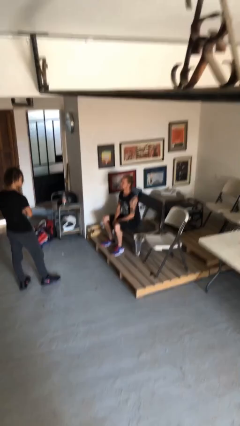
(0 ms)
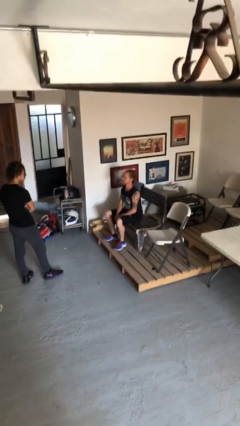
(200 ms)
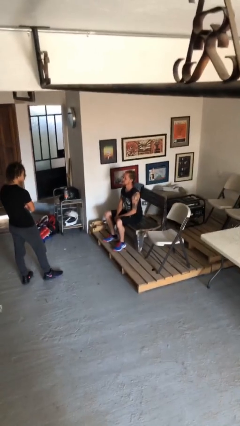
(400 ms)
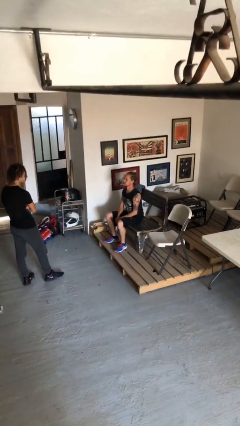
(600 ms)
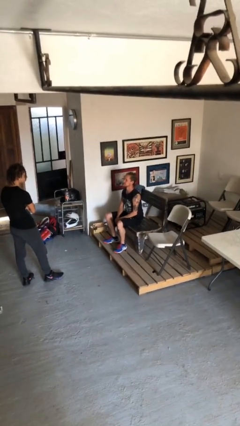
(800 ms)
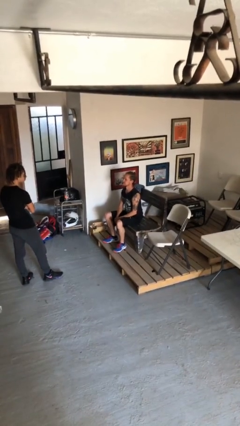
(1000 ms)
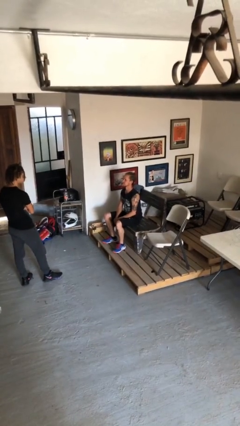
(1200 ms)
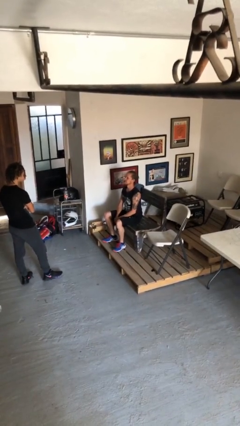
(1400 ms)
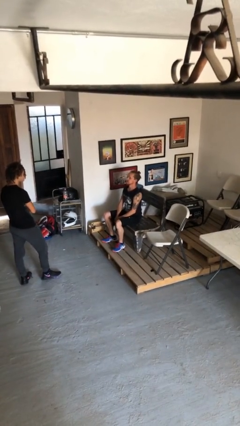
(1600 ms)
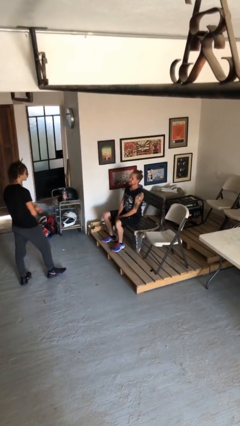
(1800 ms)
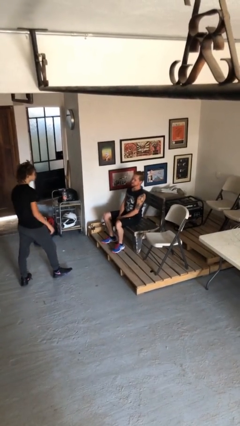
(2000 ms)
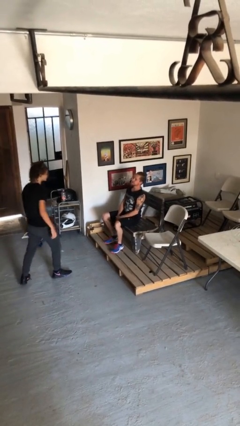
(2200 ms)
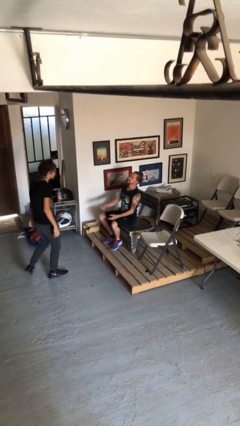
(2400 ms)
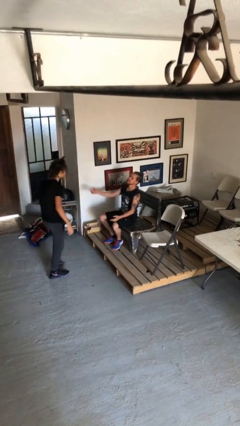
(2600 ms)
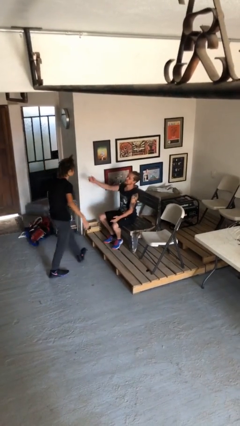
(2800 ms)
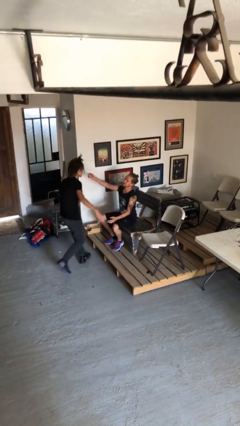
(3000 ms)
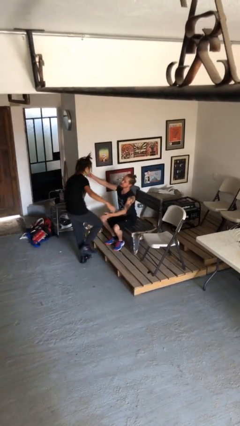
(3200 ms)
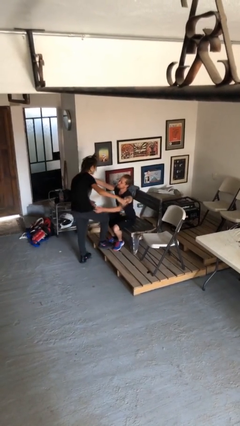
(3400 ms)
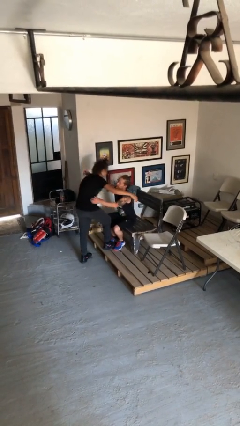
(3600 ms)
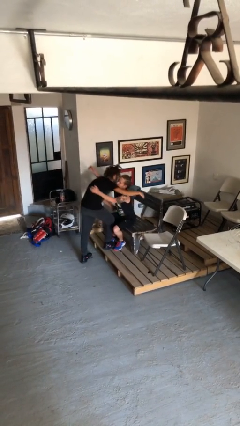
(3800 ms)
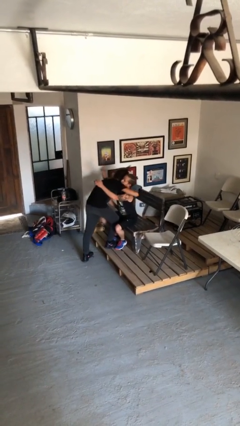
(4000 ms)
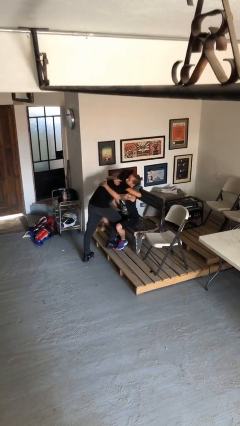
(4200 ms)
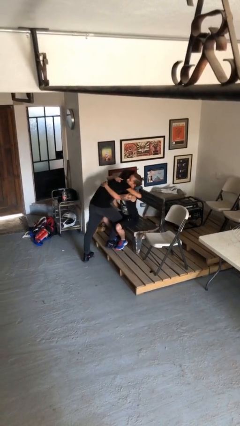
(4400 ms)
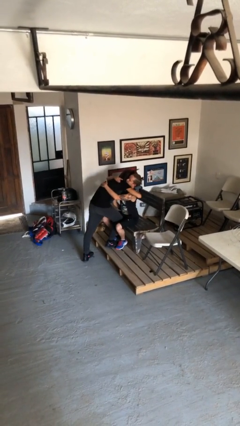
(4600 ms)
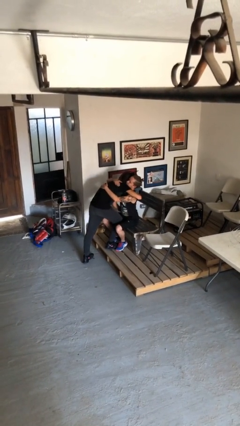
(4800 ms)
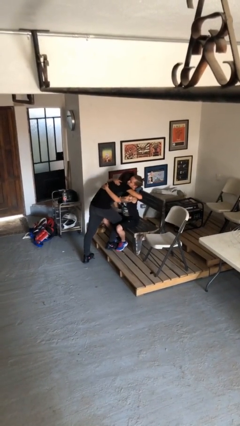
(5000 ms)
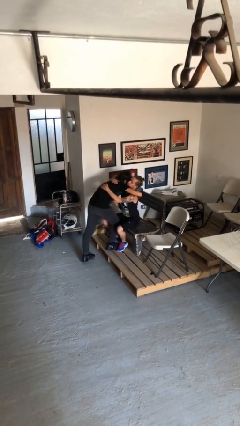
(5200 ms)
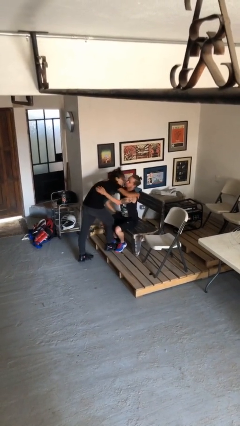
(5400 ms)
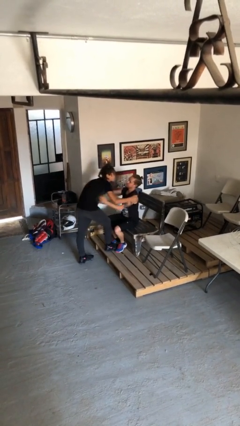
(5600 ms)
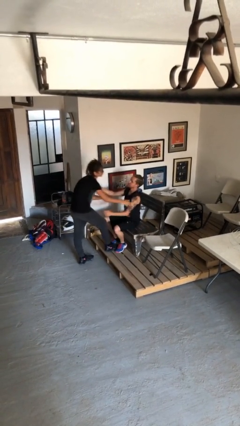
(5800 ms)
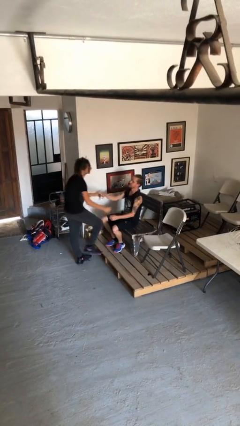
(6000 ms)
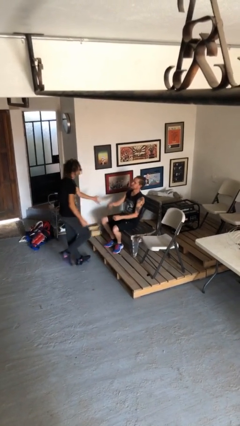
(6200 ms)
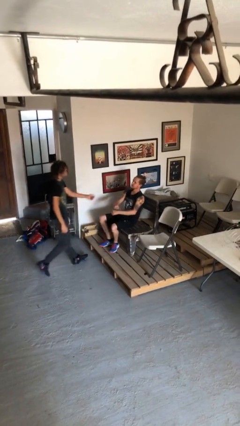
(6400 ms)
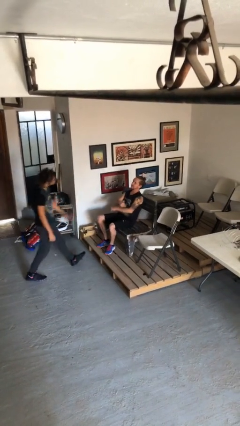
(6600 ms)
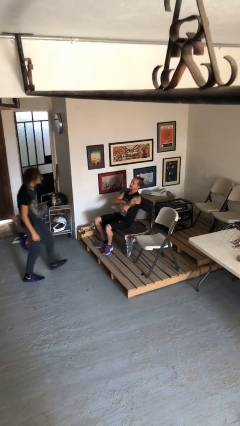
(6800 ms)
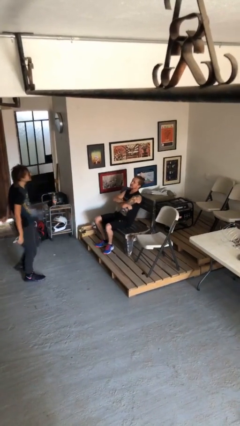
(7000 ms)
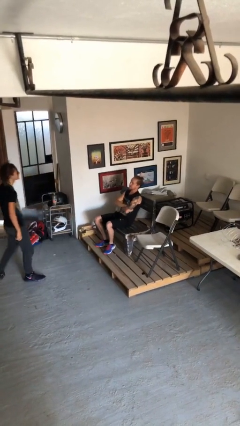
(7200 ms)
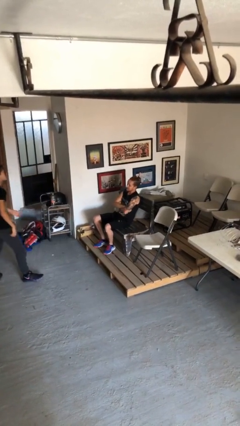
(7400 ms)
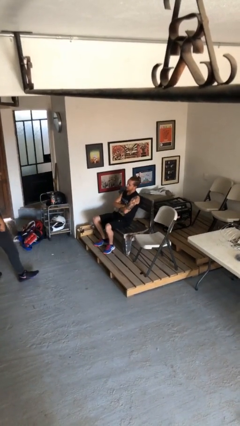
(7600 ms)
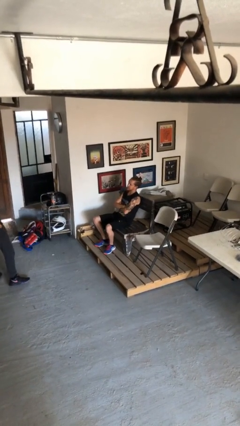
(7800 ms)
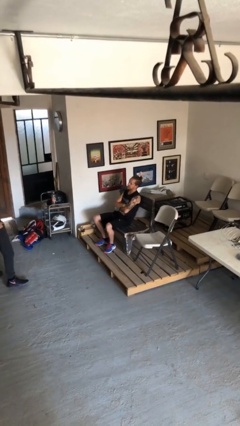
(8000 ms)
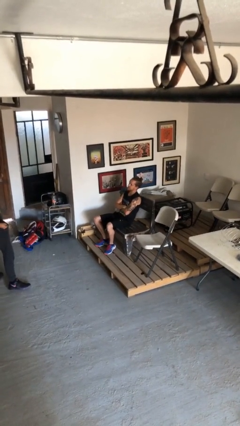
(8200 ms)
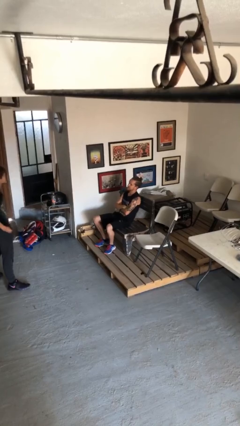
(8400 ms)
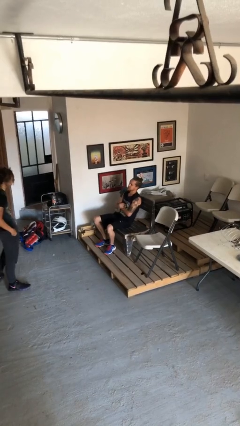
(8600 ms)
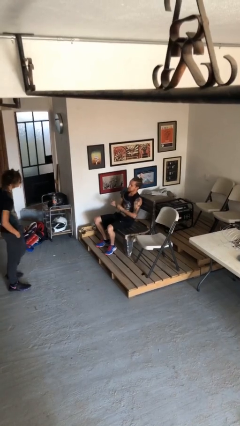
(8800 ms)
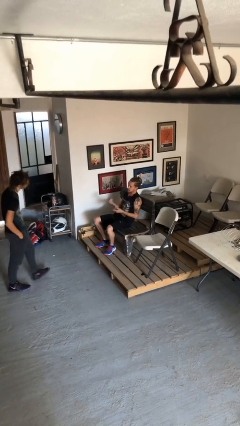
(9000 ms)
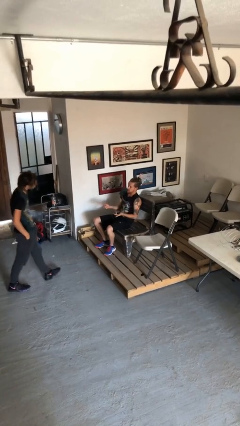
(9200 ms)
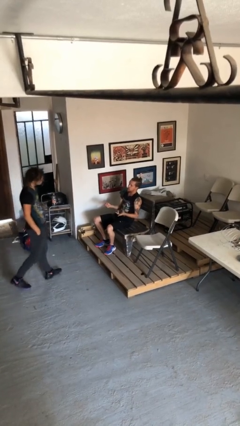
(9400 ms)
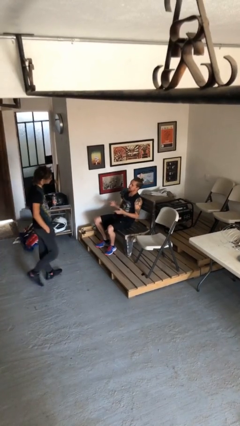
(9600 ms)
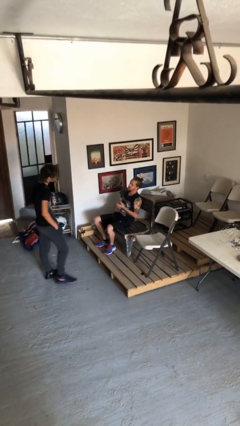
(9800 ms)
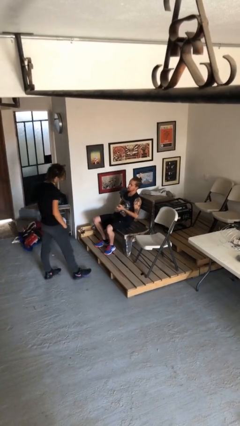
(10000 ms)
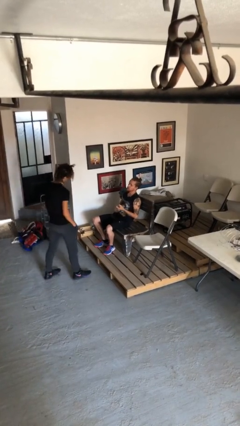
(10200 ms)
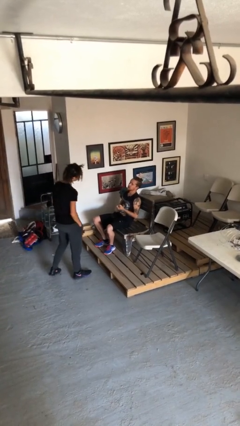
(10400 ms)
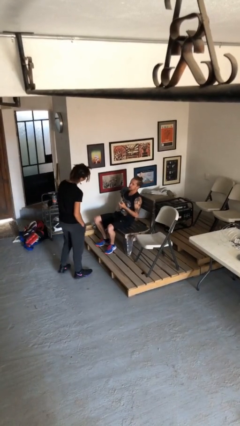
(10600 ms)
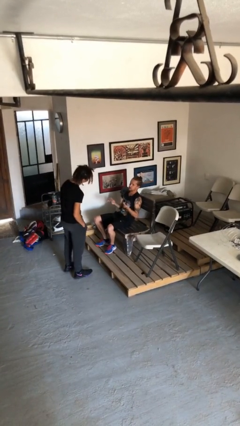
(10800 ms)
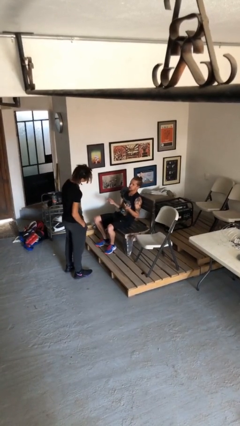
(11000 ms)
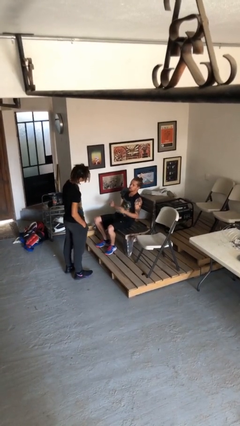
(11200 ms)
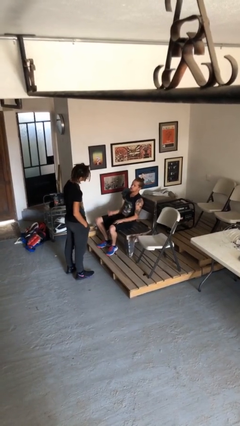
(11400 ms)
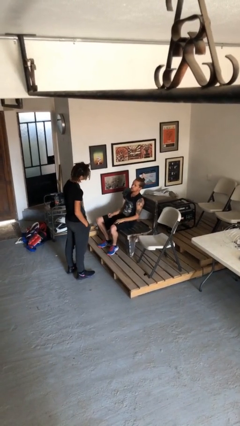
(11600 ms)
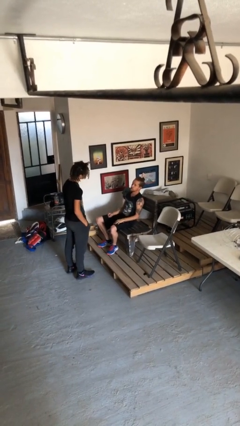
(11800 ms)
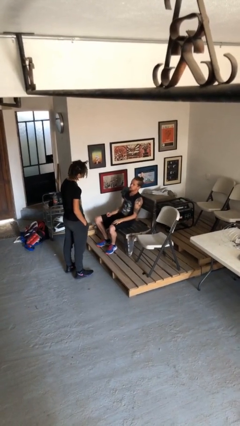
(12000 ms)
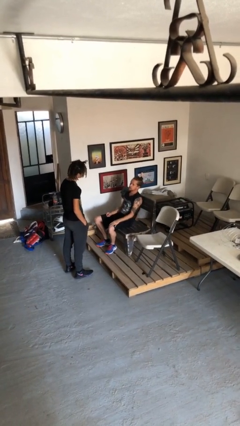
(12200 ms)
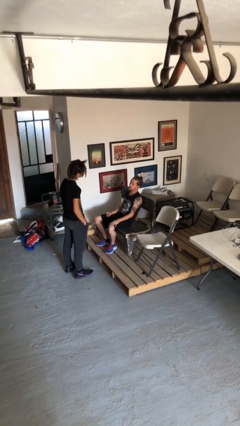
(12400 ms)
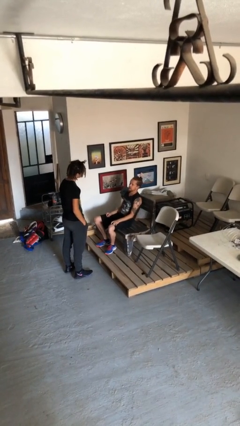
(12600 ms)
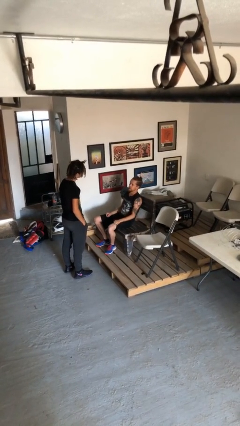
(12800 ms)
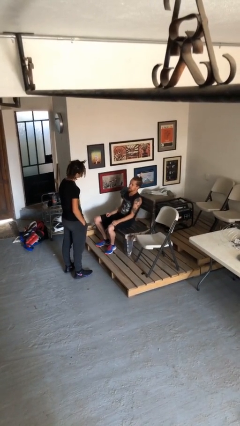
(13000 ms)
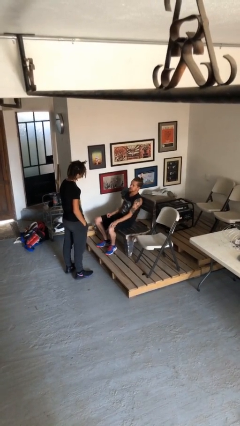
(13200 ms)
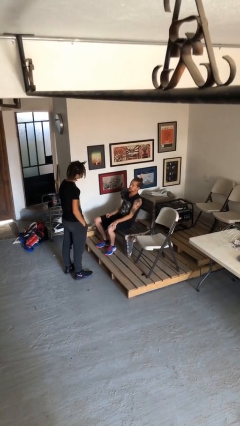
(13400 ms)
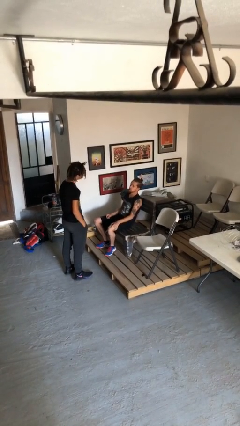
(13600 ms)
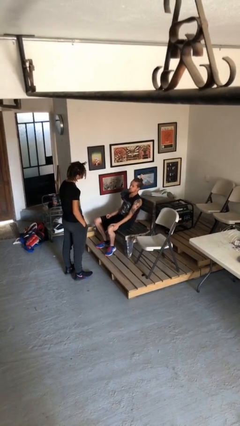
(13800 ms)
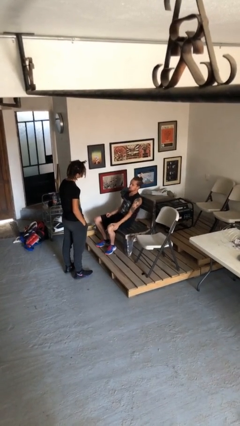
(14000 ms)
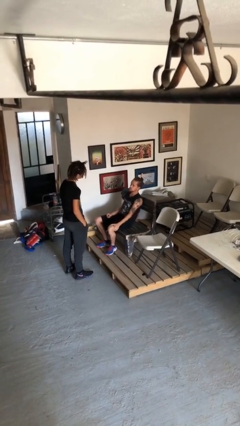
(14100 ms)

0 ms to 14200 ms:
person embraces person

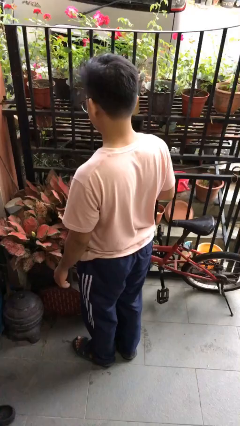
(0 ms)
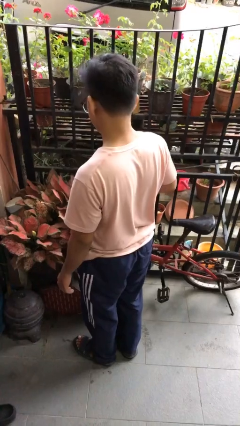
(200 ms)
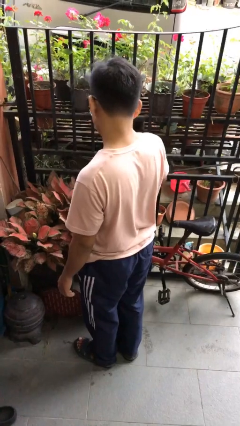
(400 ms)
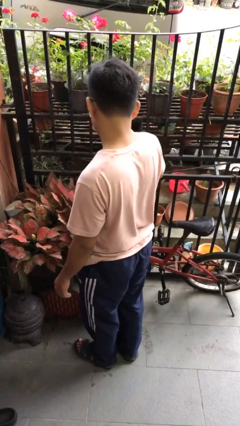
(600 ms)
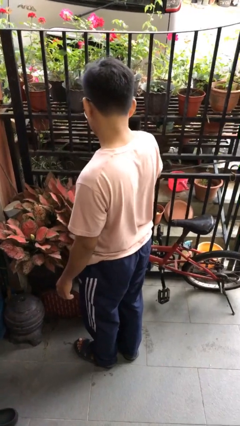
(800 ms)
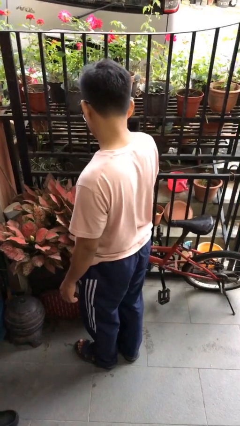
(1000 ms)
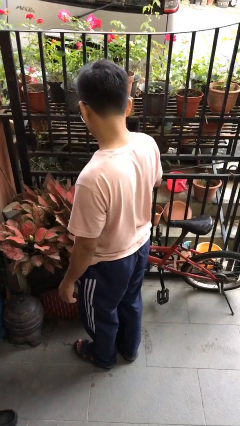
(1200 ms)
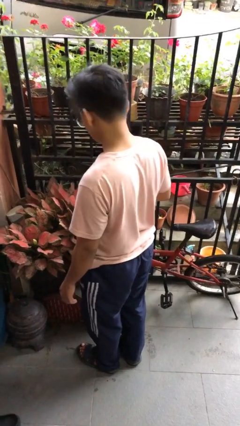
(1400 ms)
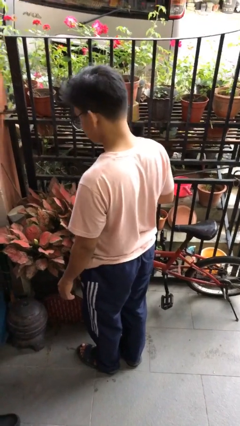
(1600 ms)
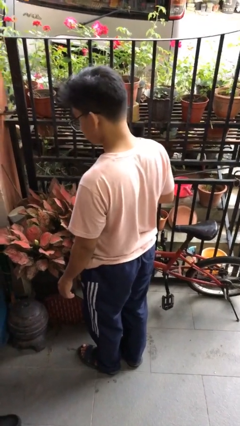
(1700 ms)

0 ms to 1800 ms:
person waters houseplant

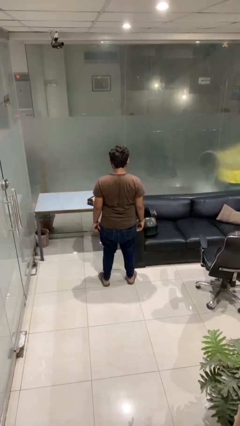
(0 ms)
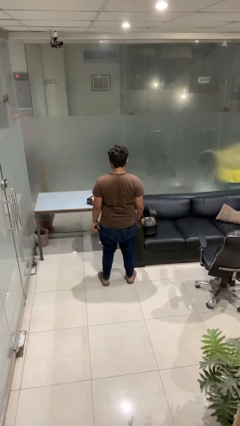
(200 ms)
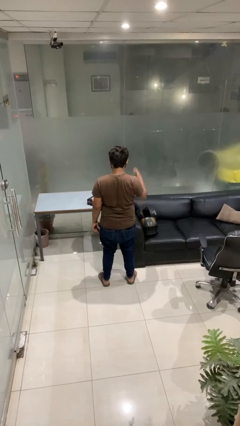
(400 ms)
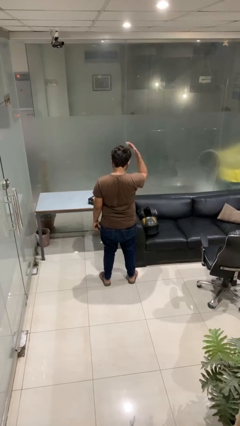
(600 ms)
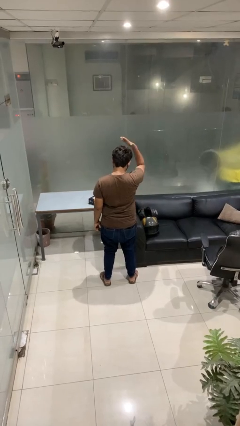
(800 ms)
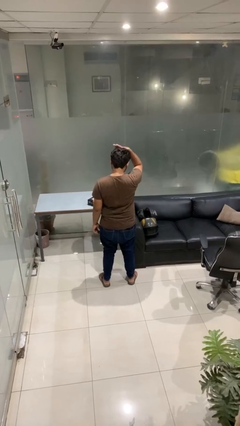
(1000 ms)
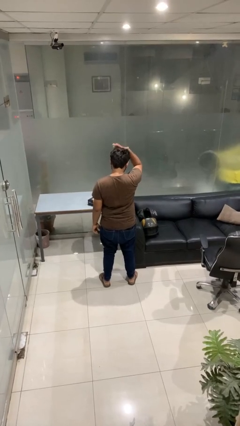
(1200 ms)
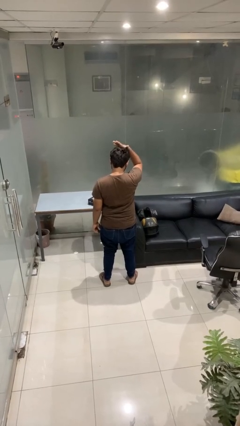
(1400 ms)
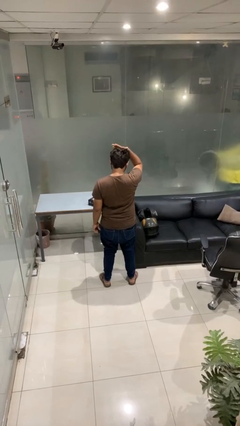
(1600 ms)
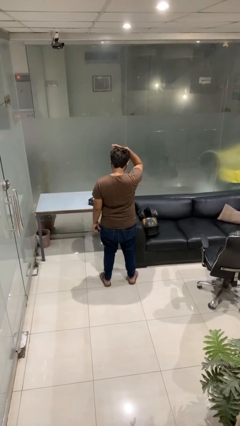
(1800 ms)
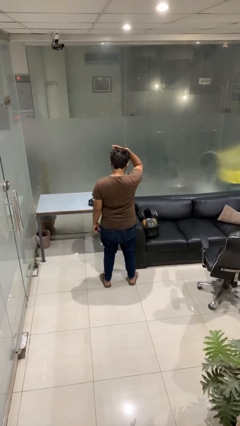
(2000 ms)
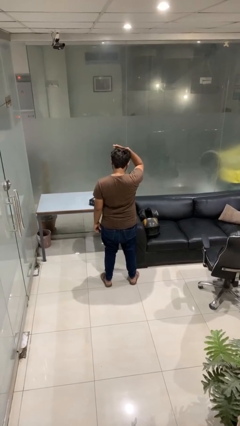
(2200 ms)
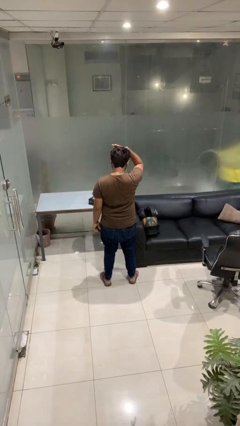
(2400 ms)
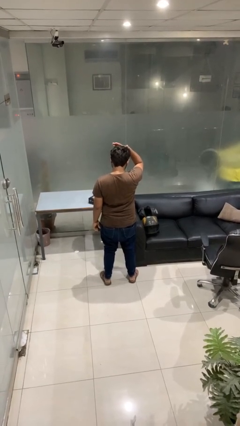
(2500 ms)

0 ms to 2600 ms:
person pats head
